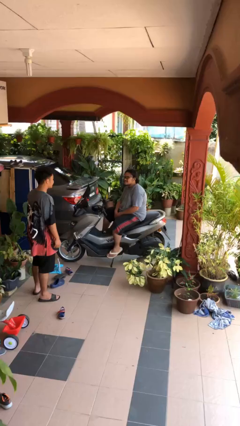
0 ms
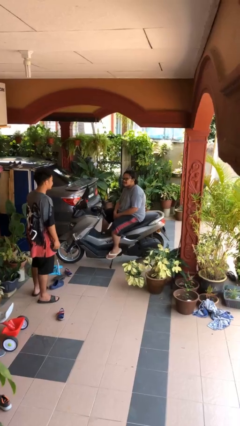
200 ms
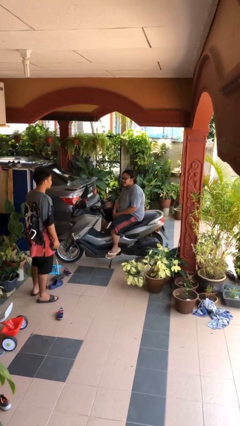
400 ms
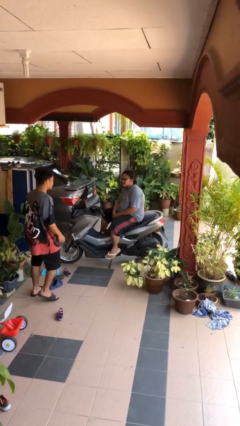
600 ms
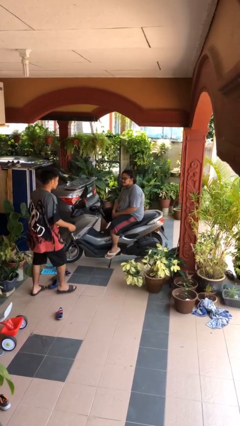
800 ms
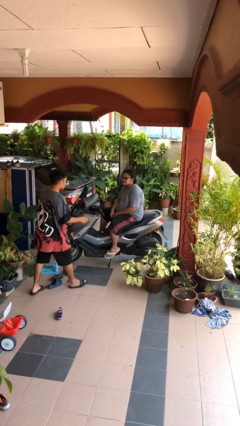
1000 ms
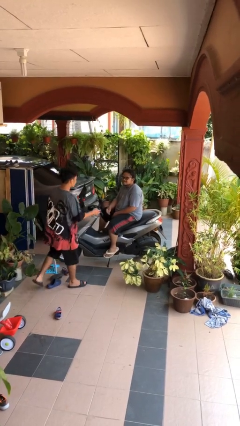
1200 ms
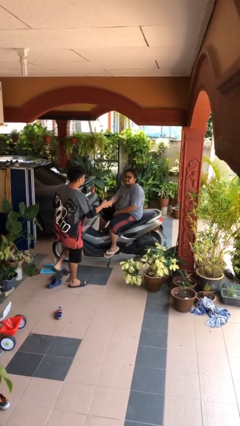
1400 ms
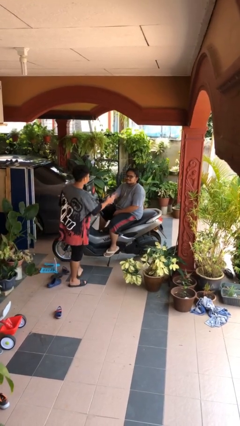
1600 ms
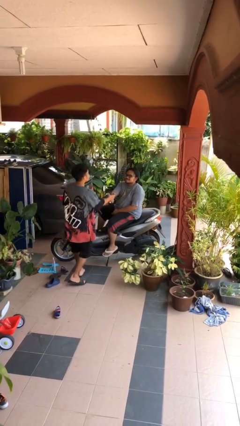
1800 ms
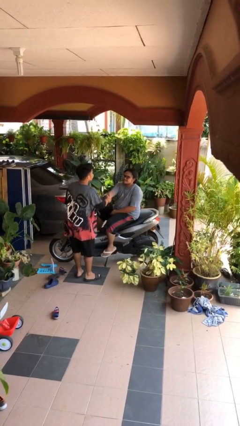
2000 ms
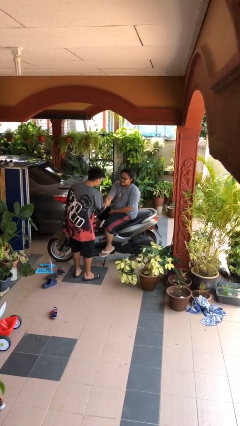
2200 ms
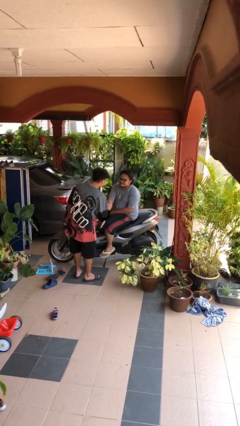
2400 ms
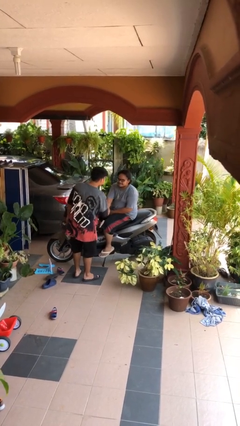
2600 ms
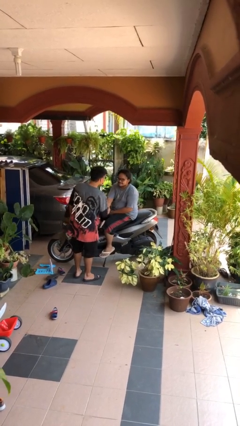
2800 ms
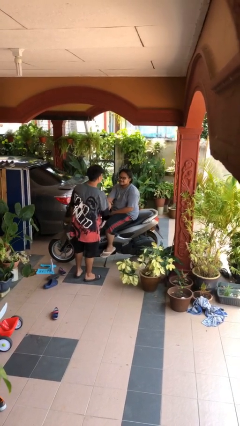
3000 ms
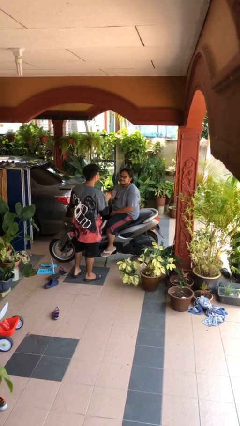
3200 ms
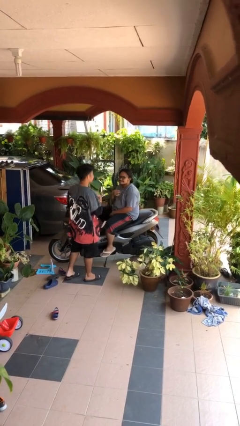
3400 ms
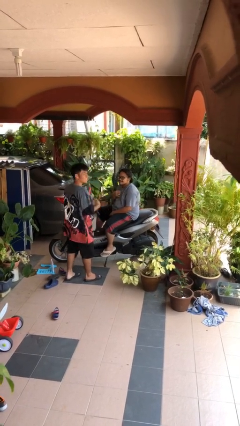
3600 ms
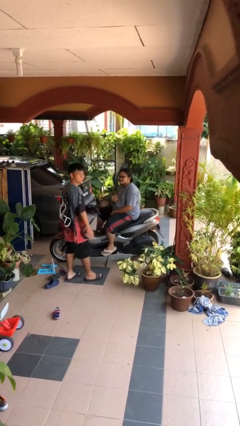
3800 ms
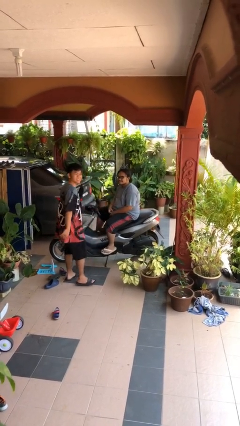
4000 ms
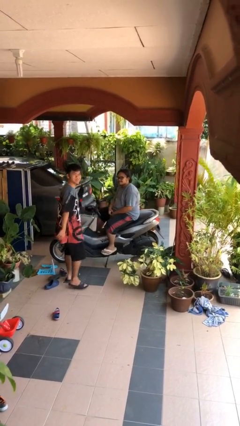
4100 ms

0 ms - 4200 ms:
person shakes hand

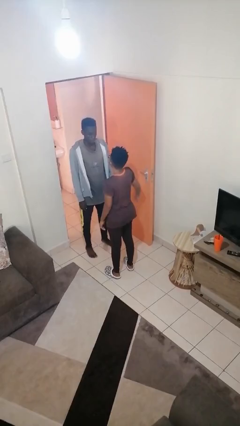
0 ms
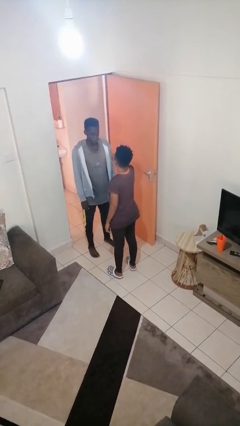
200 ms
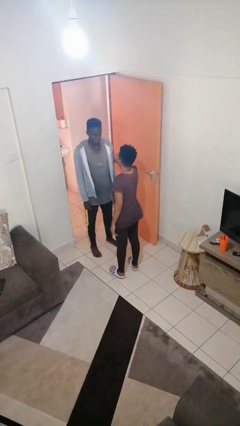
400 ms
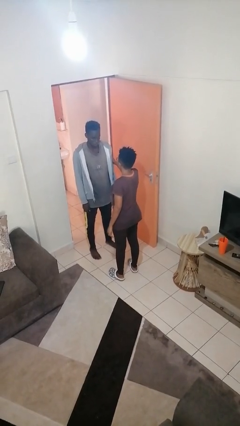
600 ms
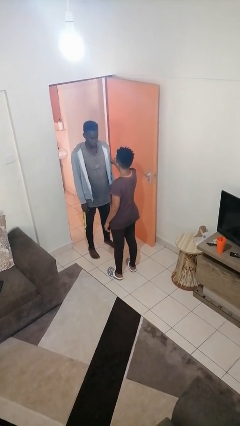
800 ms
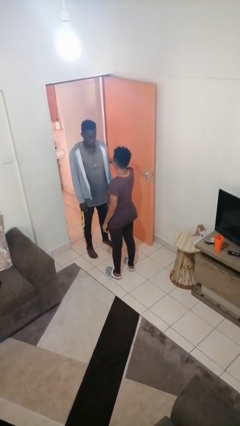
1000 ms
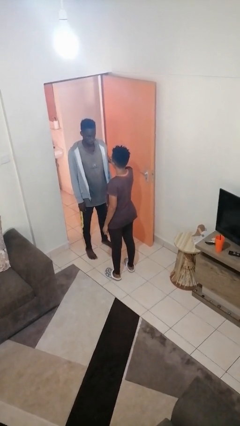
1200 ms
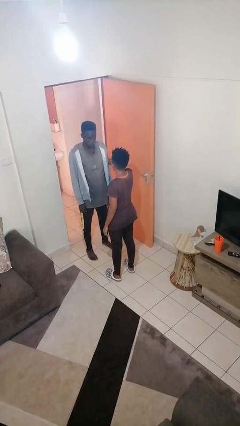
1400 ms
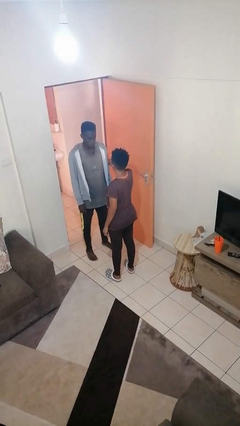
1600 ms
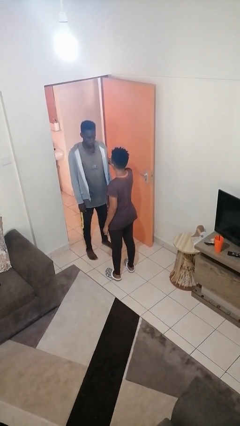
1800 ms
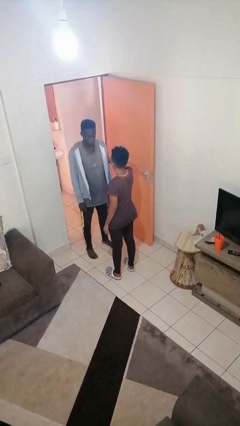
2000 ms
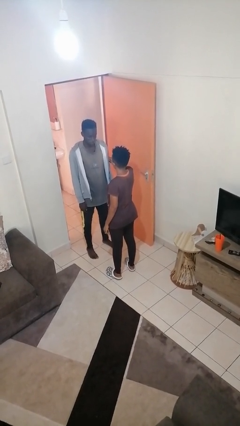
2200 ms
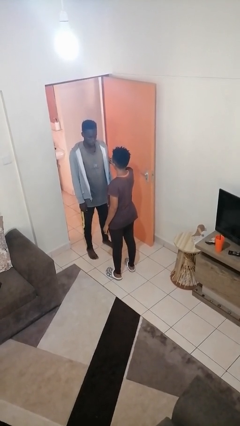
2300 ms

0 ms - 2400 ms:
person grabs person by bicep

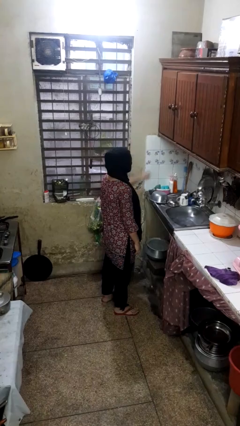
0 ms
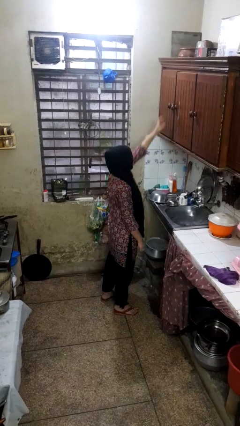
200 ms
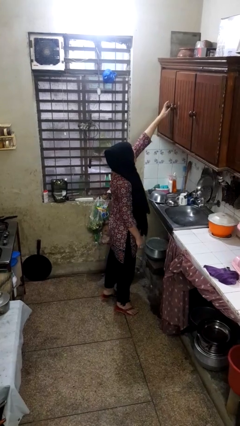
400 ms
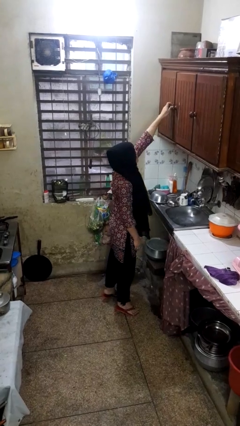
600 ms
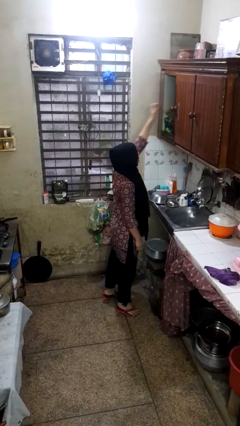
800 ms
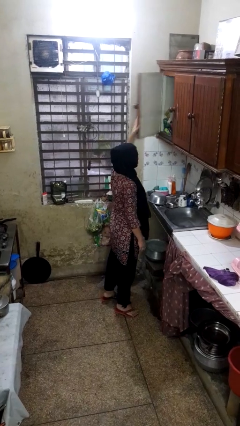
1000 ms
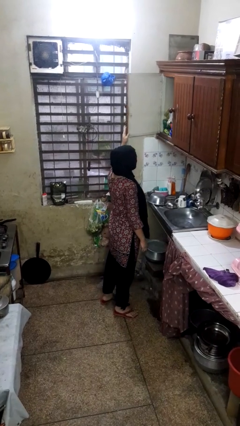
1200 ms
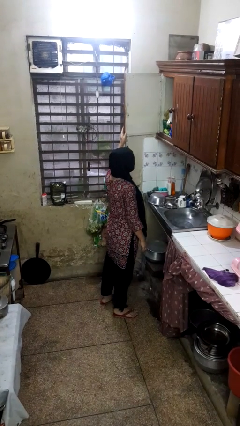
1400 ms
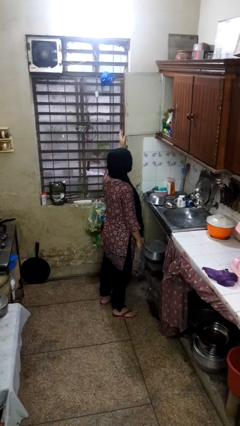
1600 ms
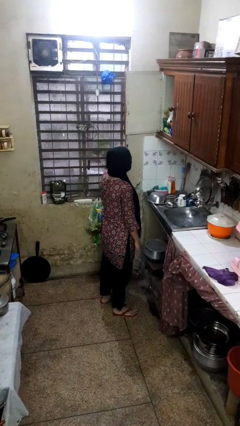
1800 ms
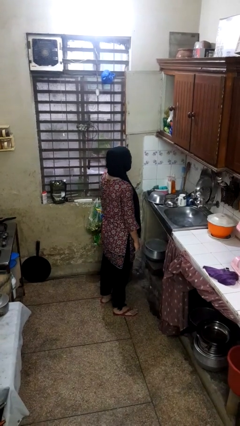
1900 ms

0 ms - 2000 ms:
person opens cabinet

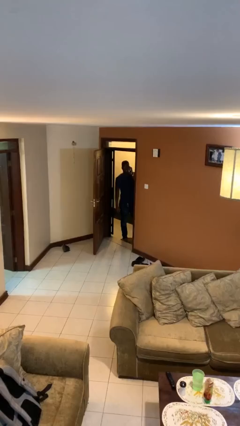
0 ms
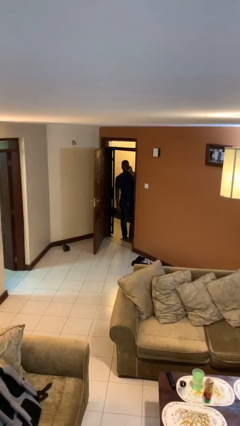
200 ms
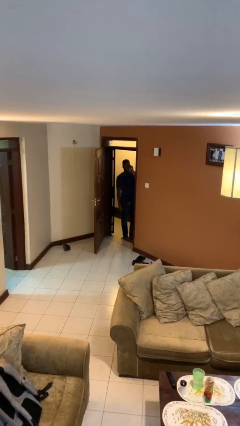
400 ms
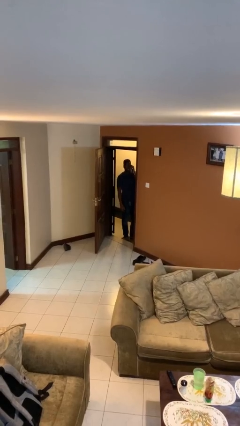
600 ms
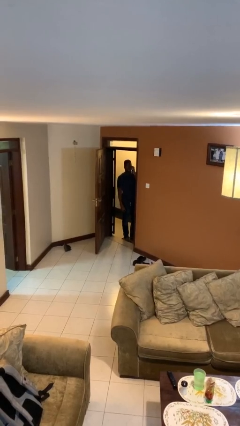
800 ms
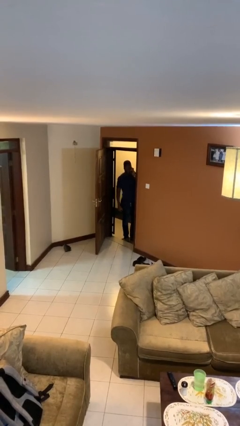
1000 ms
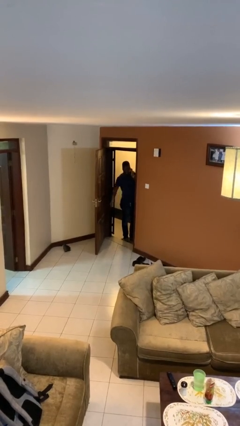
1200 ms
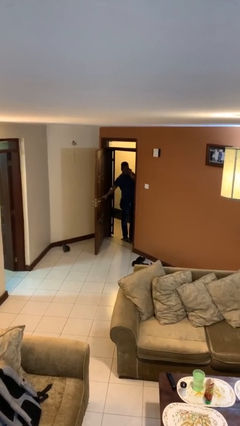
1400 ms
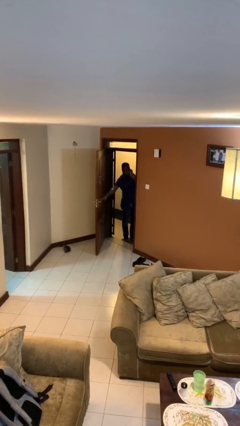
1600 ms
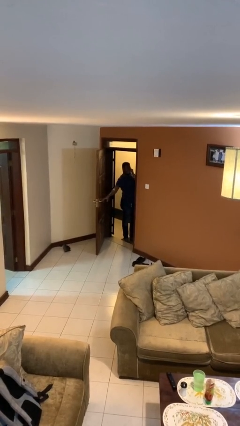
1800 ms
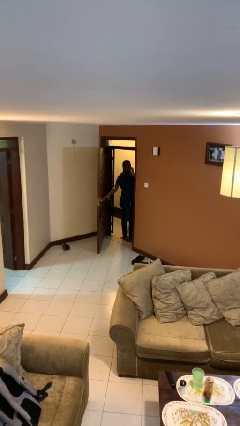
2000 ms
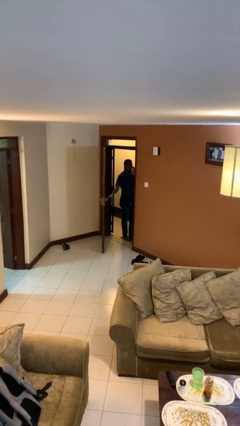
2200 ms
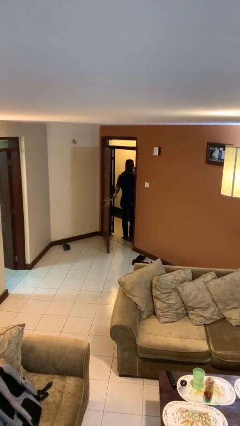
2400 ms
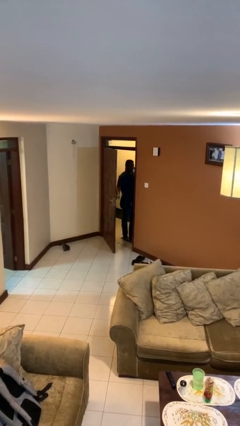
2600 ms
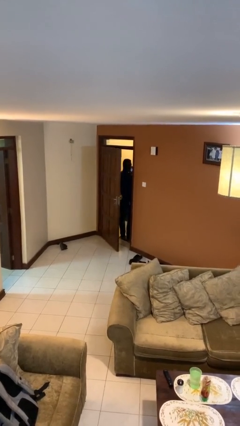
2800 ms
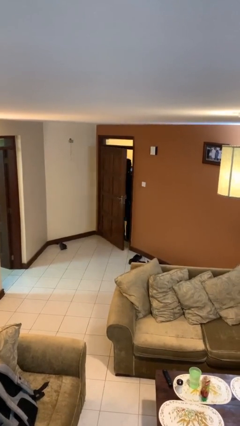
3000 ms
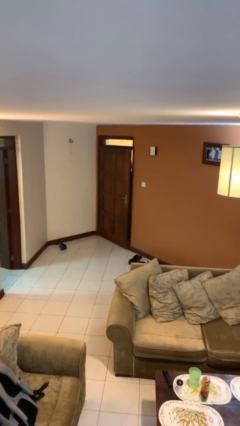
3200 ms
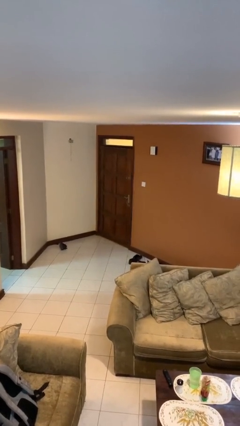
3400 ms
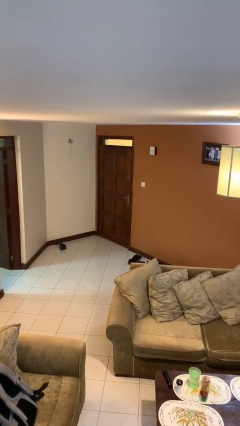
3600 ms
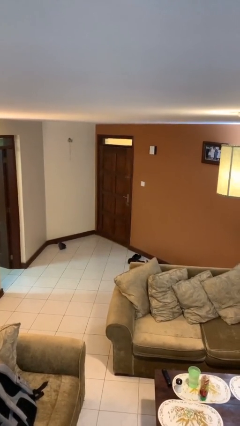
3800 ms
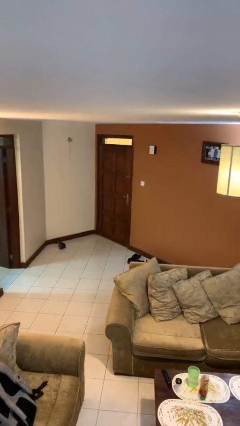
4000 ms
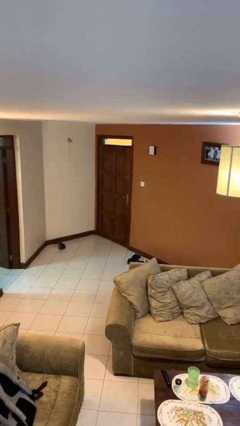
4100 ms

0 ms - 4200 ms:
person closes facility door

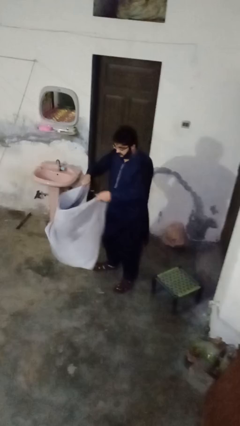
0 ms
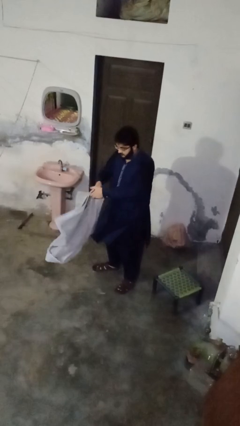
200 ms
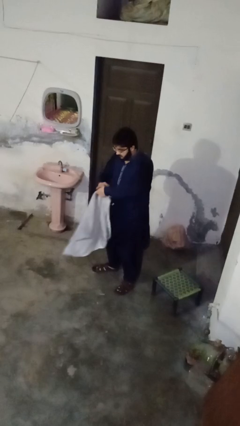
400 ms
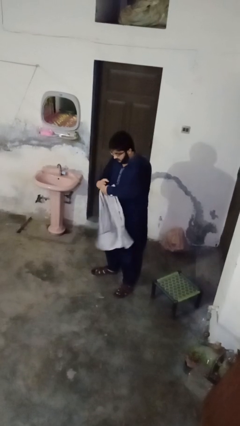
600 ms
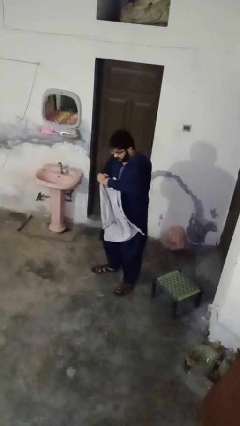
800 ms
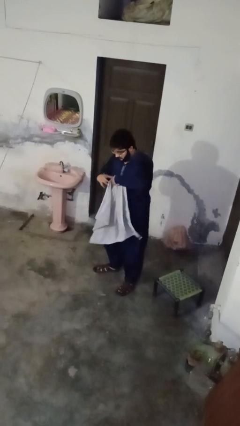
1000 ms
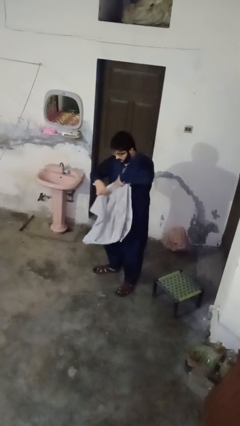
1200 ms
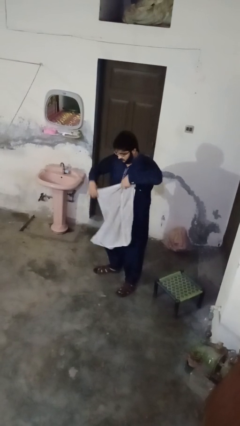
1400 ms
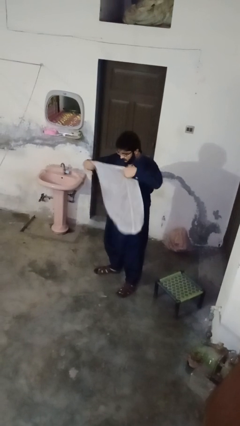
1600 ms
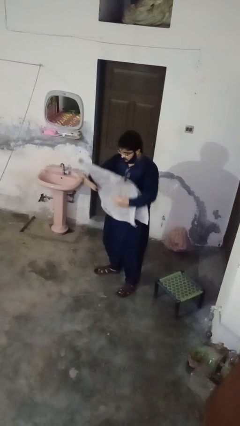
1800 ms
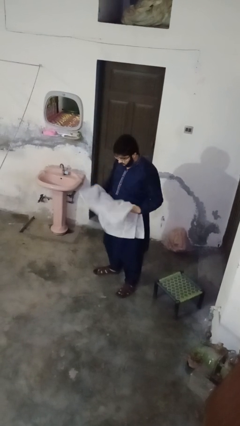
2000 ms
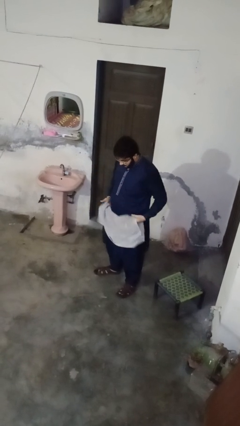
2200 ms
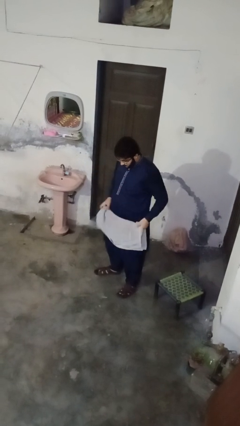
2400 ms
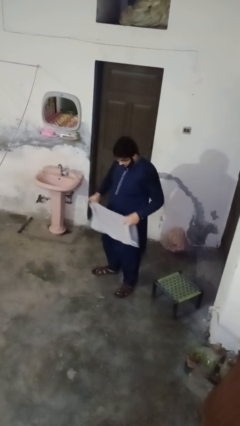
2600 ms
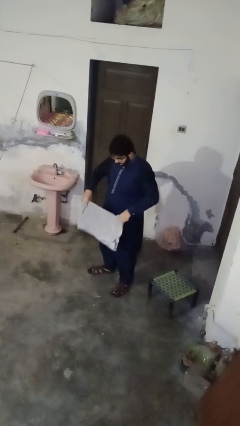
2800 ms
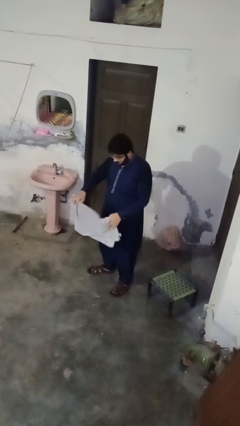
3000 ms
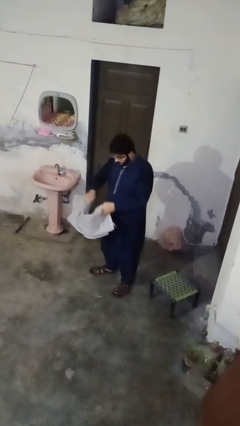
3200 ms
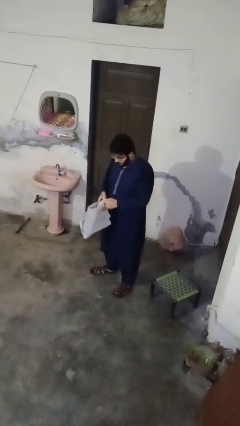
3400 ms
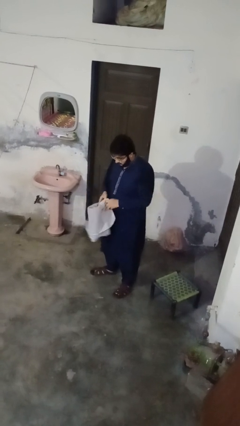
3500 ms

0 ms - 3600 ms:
person folds towel

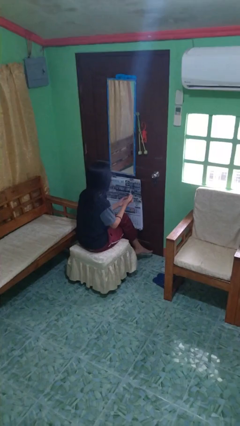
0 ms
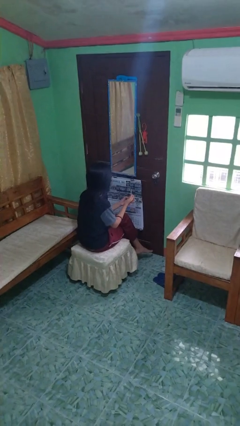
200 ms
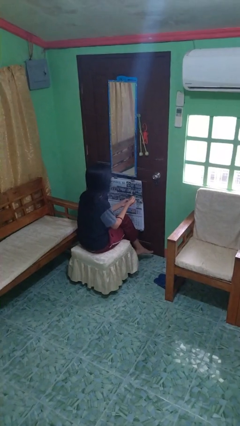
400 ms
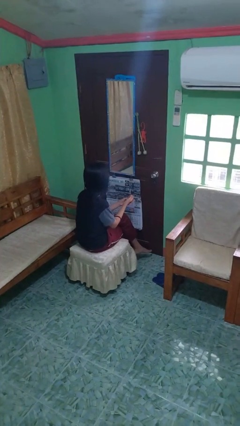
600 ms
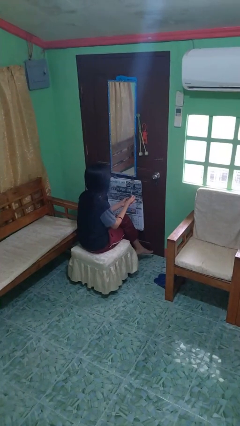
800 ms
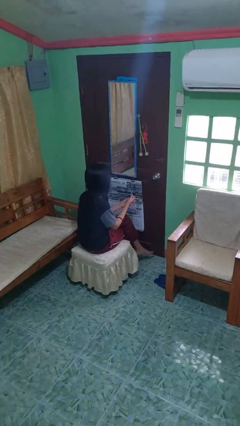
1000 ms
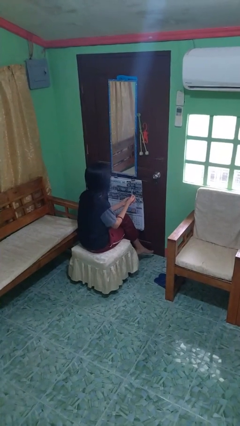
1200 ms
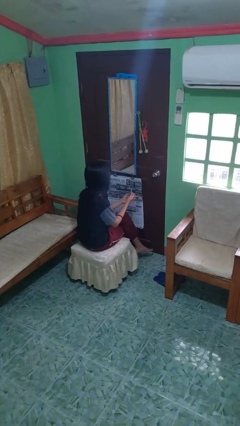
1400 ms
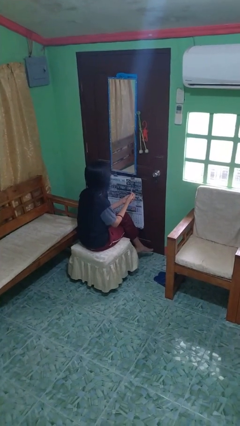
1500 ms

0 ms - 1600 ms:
person cracks knuckles
